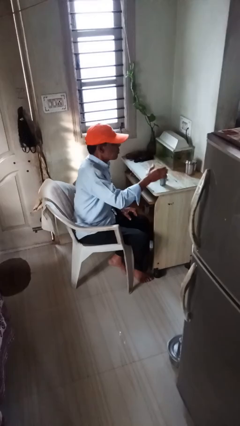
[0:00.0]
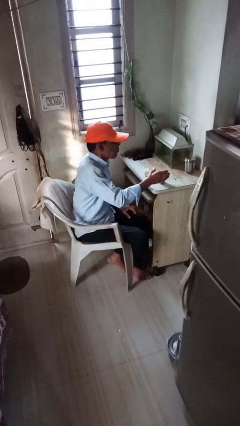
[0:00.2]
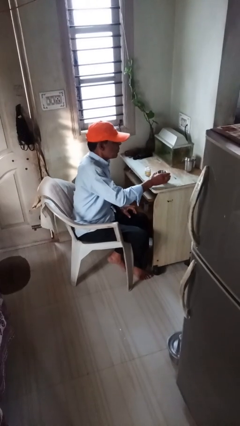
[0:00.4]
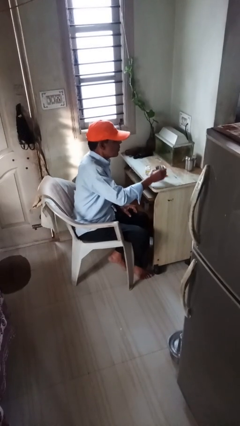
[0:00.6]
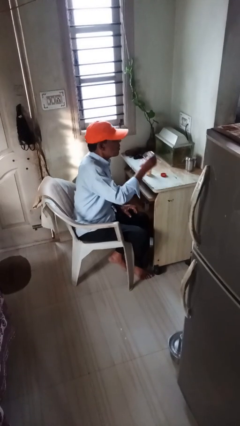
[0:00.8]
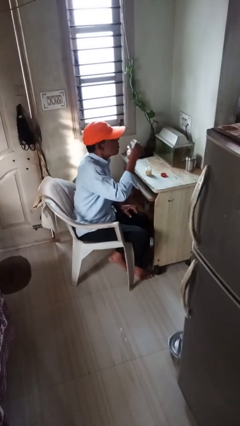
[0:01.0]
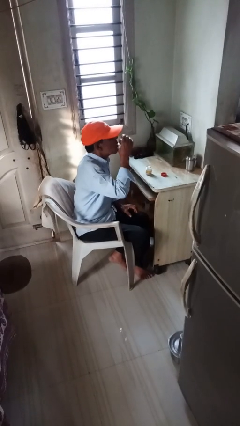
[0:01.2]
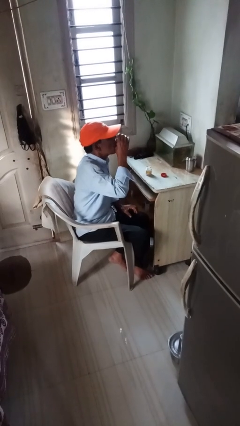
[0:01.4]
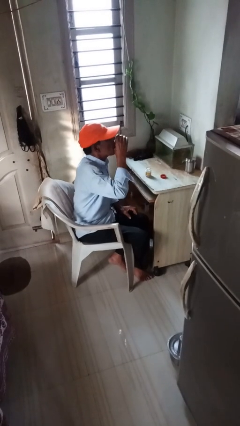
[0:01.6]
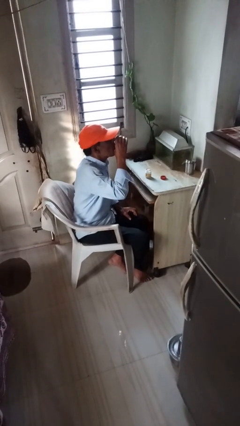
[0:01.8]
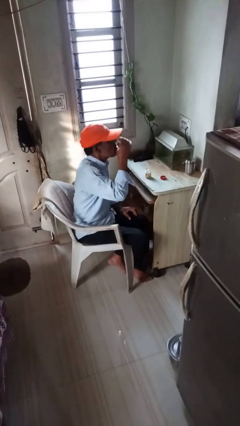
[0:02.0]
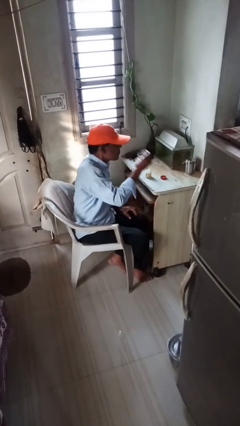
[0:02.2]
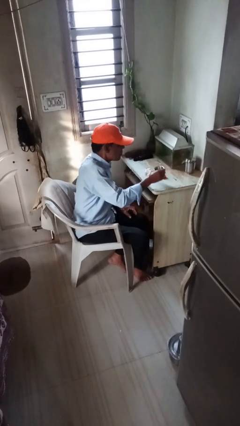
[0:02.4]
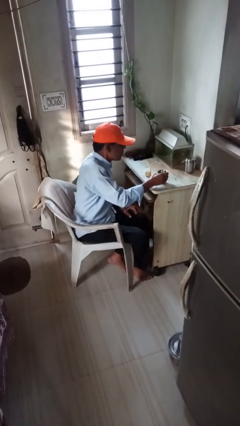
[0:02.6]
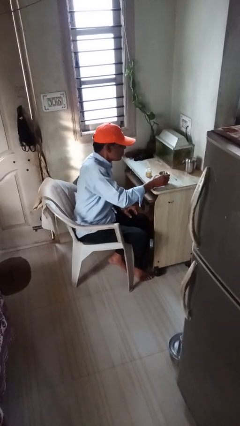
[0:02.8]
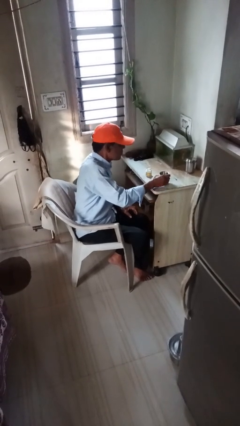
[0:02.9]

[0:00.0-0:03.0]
person drinks from cup

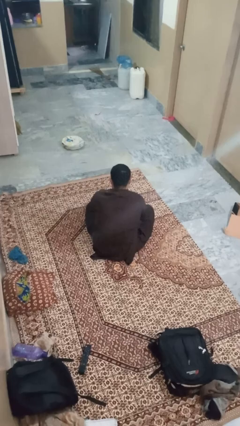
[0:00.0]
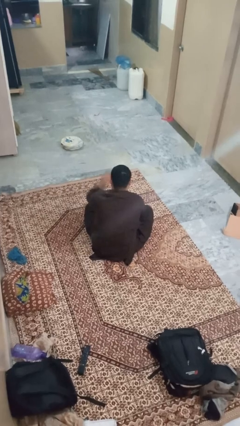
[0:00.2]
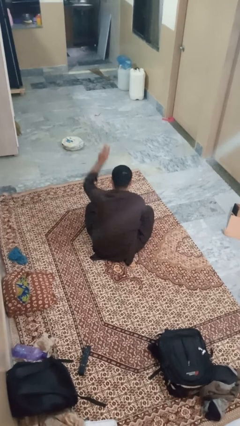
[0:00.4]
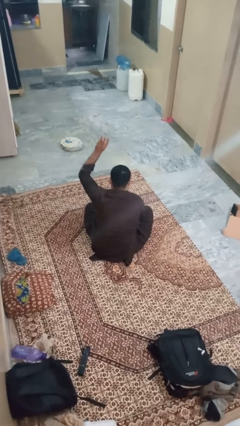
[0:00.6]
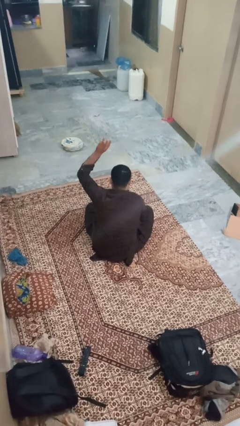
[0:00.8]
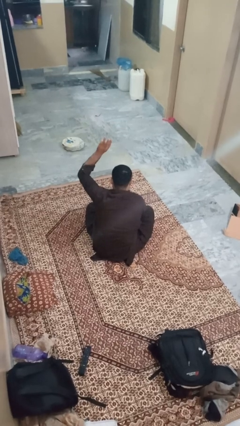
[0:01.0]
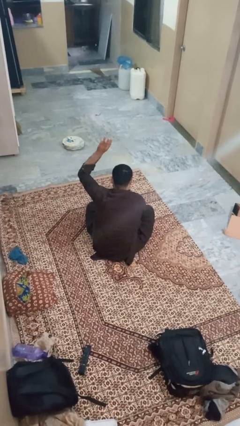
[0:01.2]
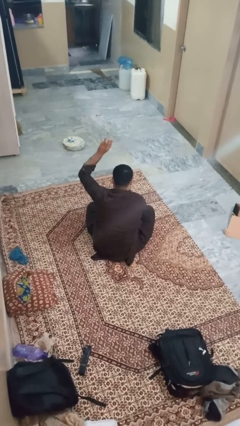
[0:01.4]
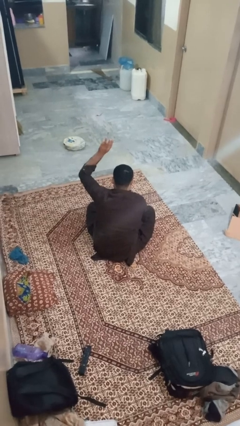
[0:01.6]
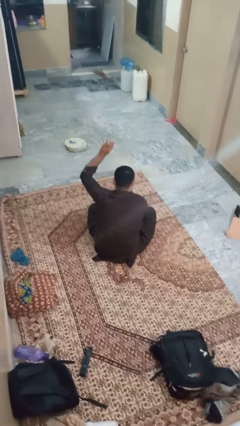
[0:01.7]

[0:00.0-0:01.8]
person gestures number three

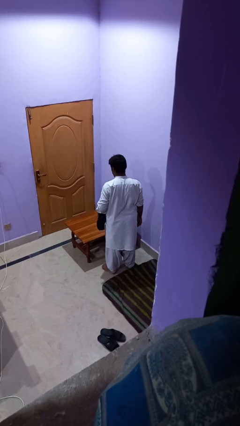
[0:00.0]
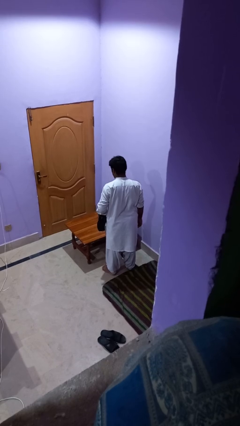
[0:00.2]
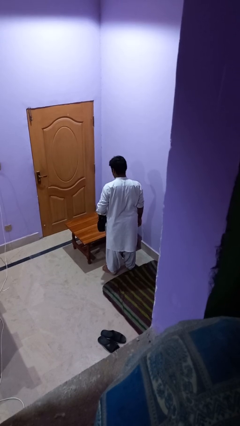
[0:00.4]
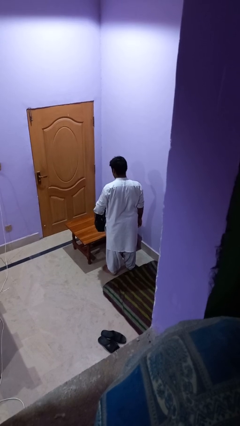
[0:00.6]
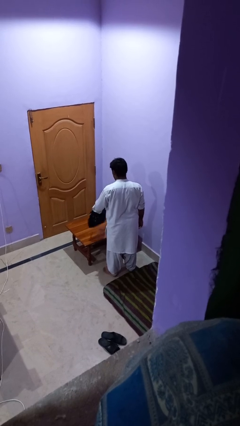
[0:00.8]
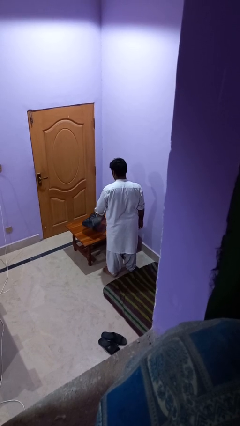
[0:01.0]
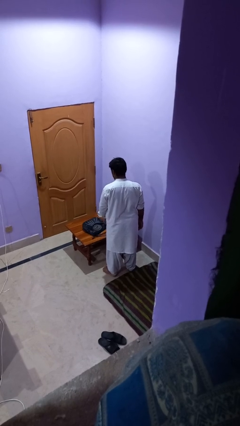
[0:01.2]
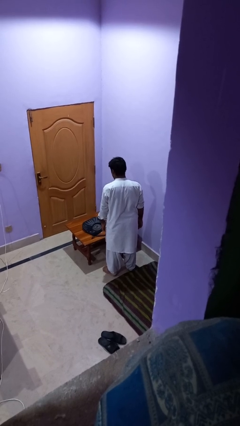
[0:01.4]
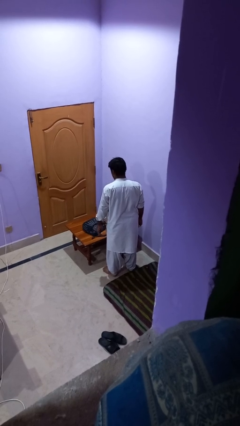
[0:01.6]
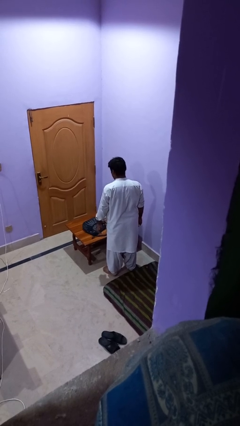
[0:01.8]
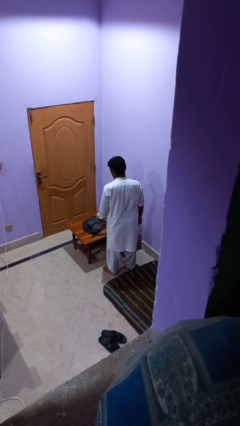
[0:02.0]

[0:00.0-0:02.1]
person throws object on table

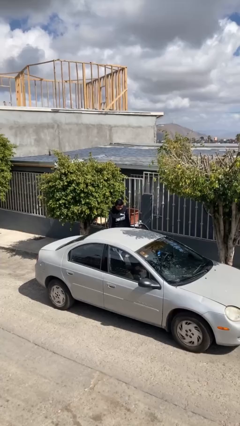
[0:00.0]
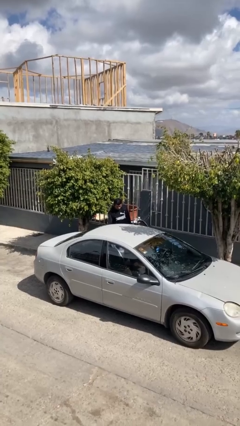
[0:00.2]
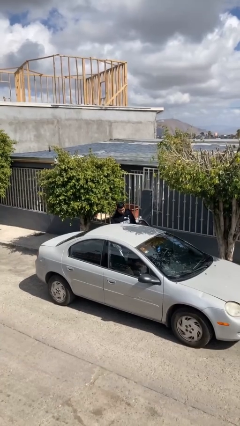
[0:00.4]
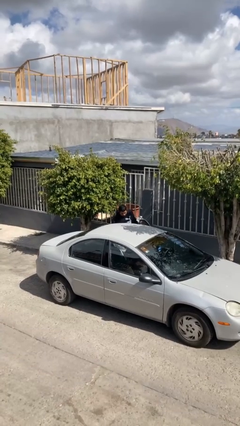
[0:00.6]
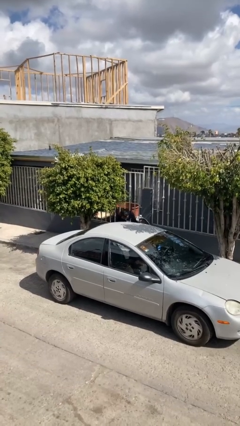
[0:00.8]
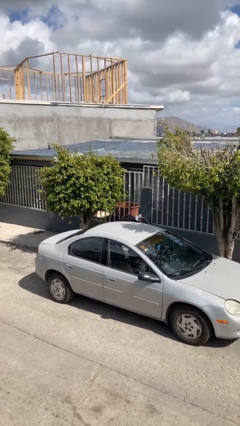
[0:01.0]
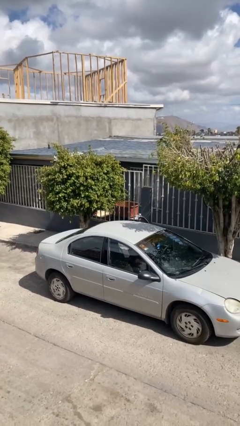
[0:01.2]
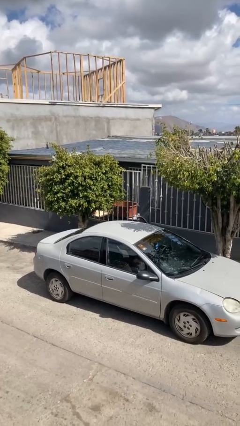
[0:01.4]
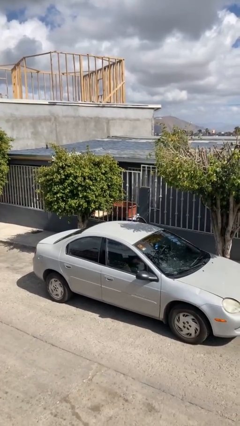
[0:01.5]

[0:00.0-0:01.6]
person enters car

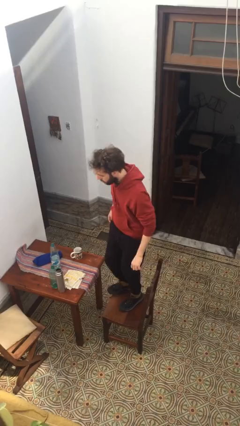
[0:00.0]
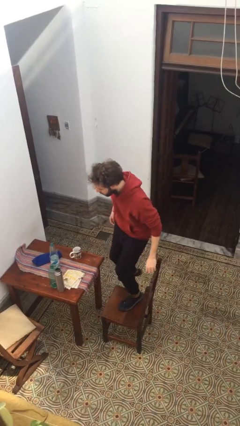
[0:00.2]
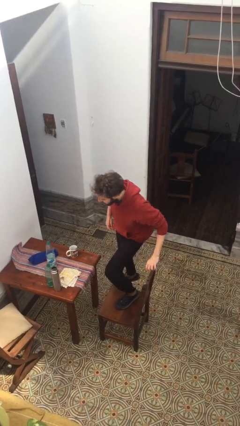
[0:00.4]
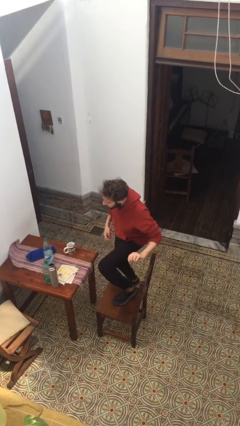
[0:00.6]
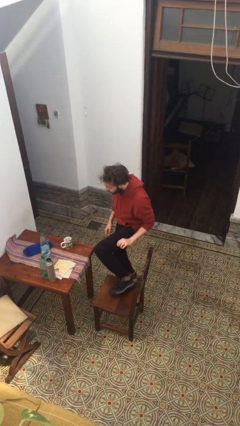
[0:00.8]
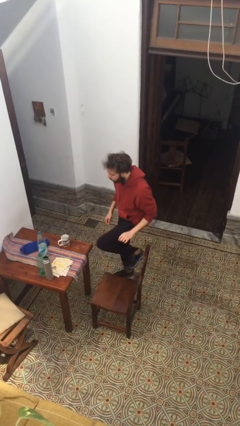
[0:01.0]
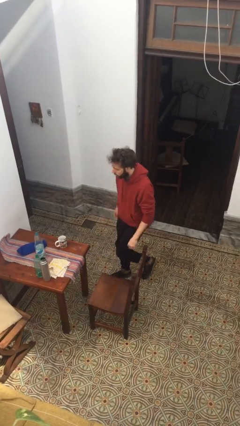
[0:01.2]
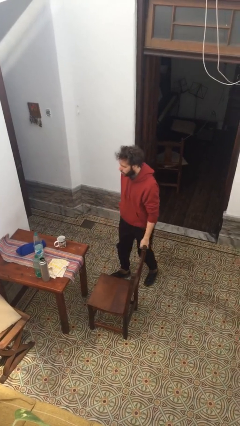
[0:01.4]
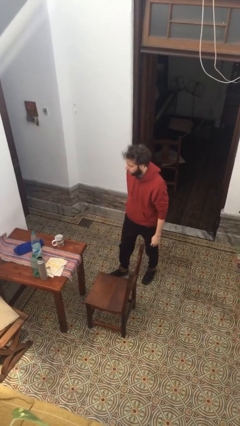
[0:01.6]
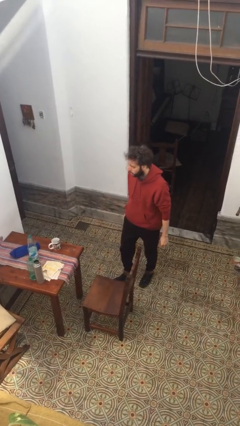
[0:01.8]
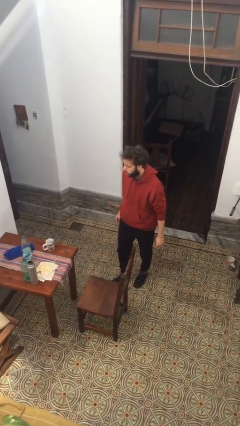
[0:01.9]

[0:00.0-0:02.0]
person climbs off chair

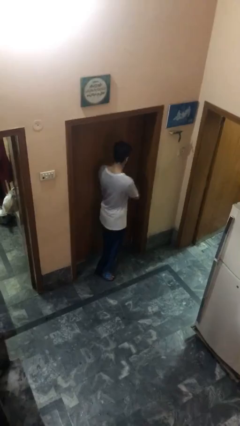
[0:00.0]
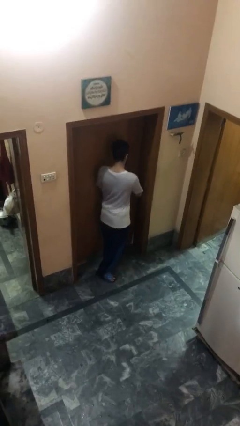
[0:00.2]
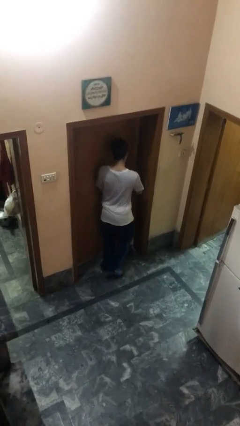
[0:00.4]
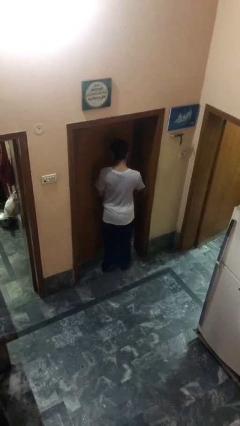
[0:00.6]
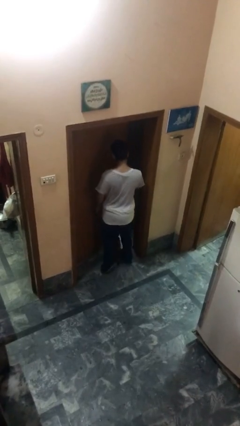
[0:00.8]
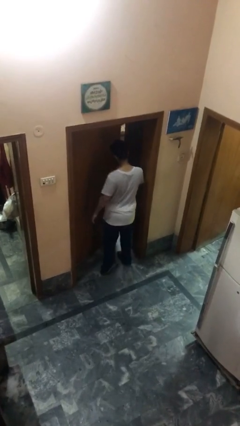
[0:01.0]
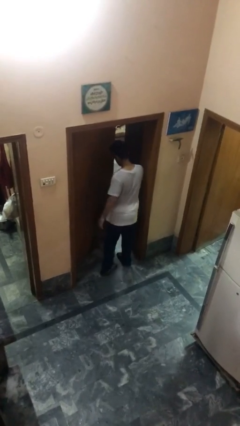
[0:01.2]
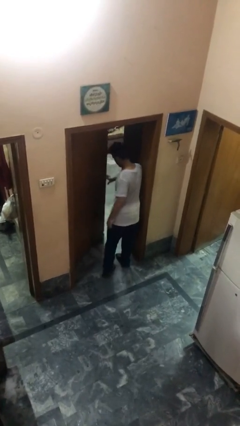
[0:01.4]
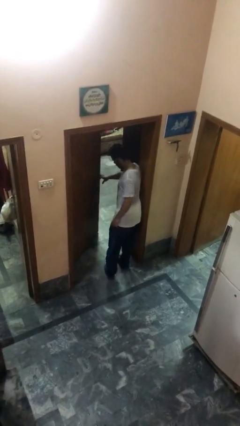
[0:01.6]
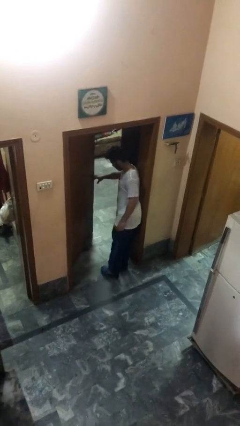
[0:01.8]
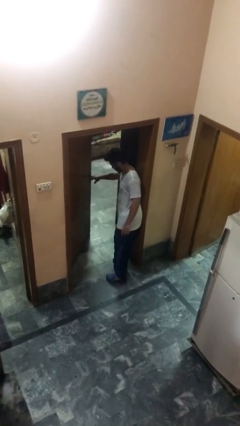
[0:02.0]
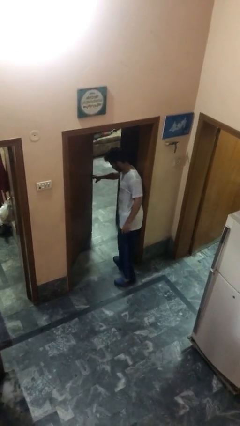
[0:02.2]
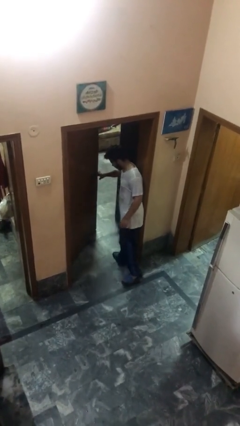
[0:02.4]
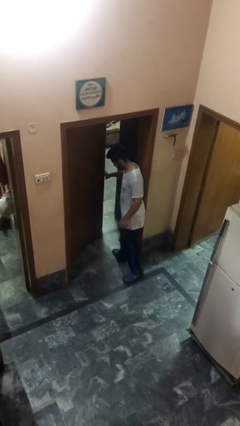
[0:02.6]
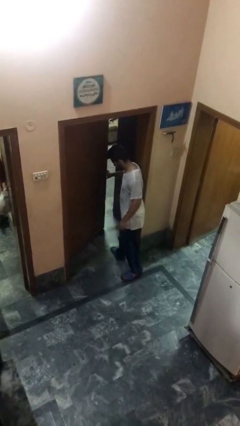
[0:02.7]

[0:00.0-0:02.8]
person opens facility door

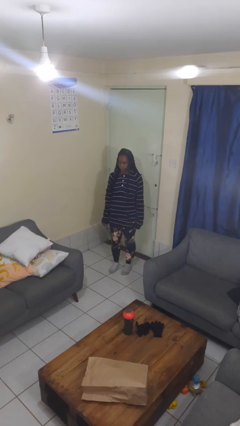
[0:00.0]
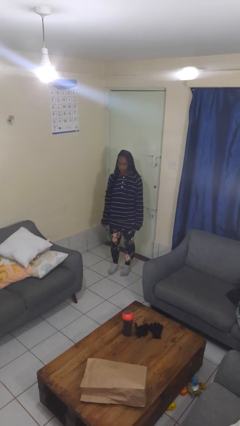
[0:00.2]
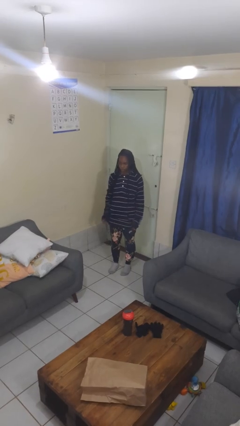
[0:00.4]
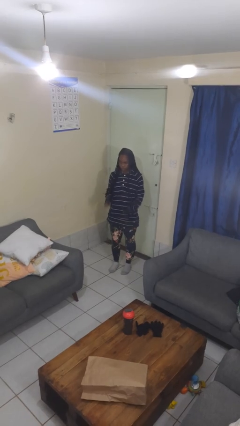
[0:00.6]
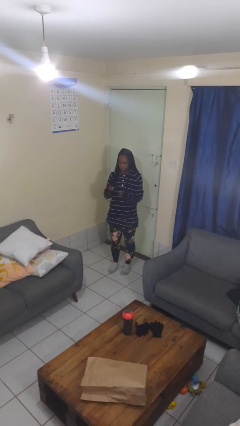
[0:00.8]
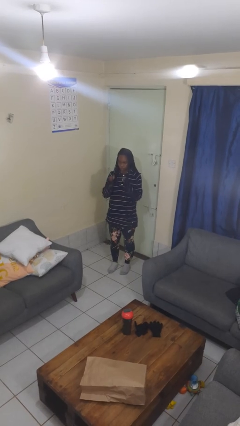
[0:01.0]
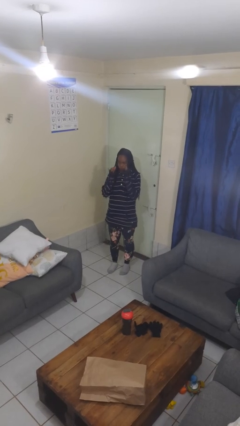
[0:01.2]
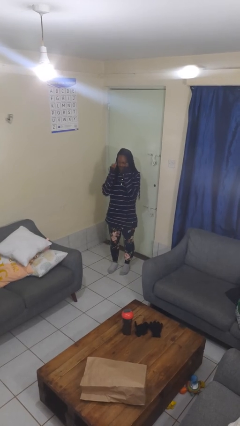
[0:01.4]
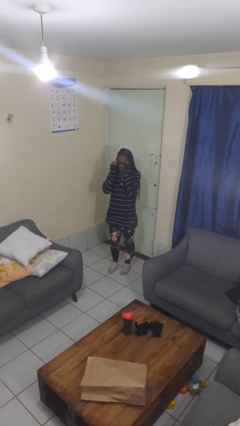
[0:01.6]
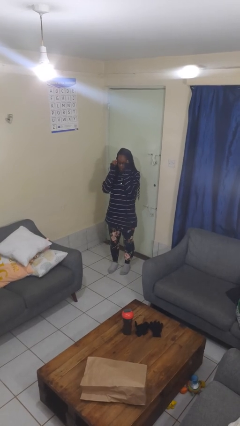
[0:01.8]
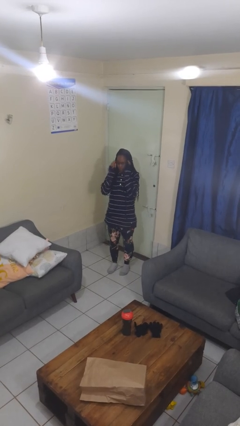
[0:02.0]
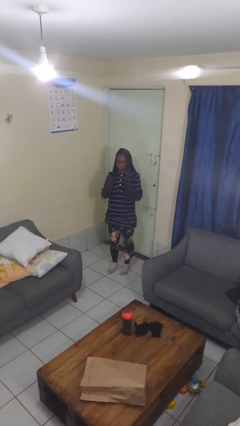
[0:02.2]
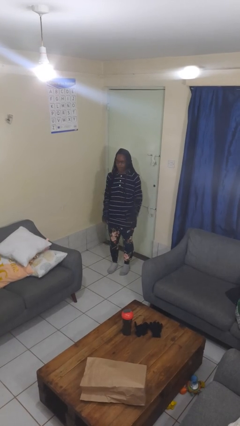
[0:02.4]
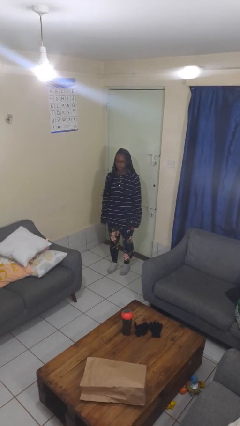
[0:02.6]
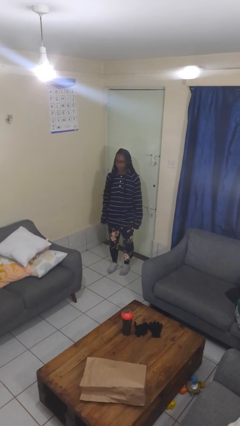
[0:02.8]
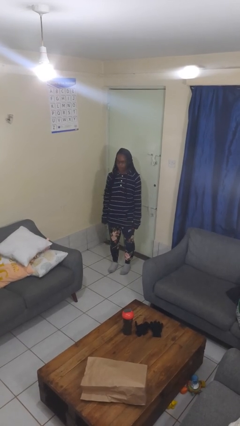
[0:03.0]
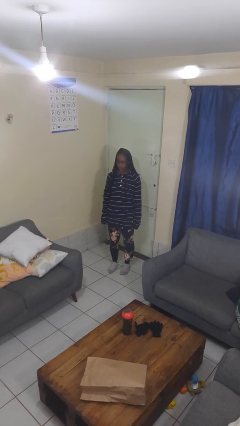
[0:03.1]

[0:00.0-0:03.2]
person puts on glasses

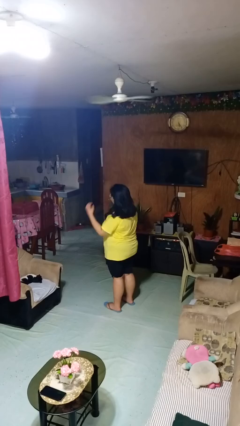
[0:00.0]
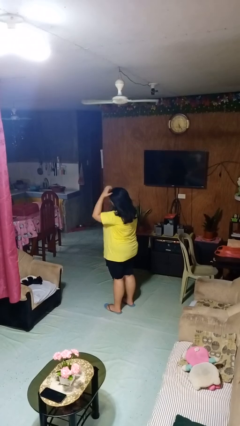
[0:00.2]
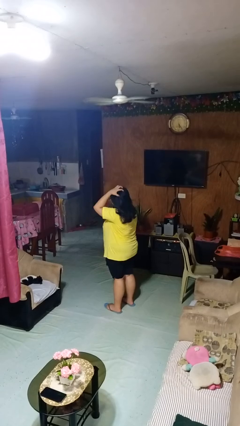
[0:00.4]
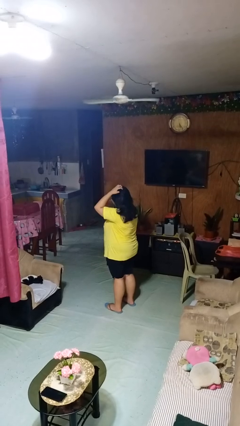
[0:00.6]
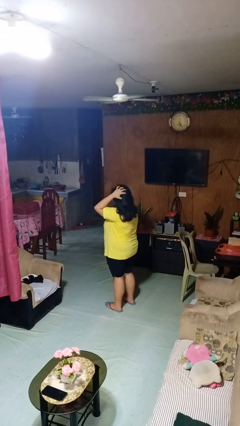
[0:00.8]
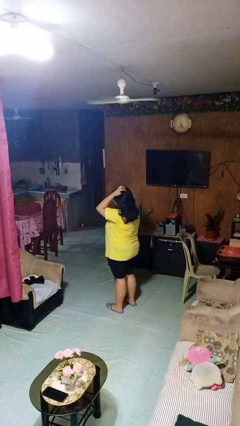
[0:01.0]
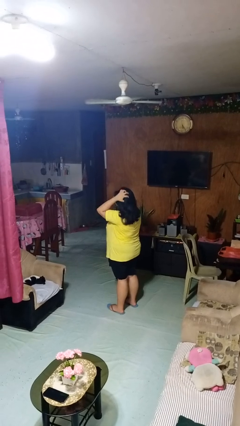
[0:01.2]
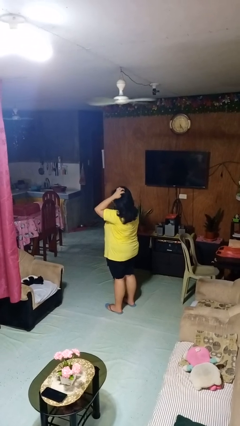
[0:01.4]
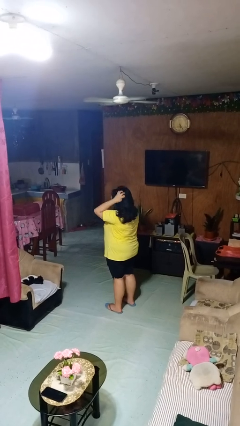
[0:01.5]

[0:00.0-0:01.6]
person scratches face
